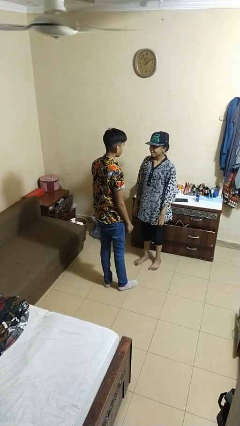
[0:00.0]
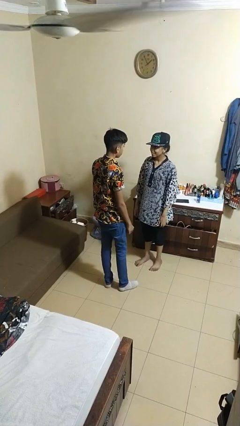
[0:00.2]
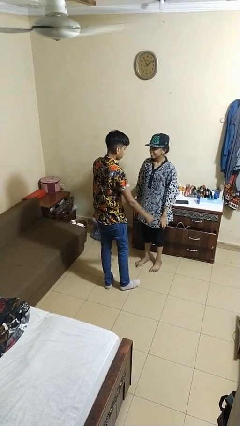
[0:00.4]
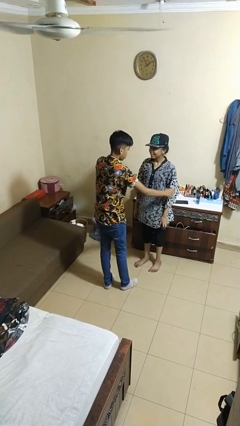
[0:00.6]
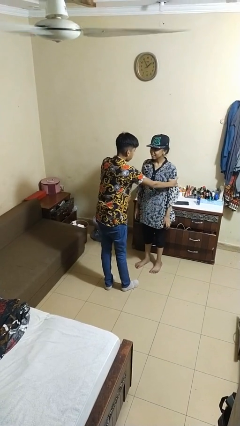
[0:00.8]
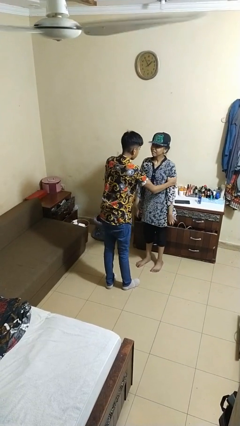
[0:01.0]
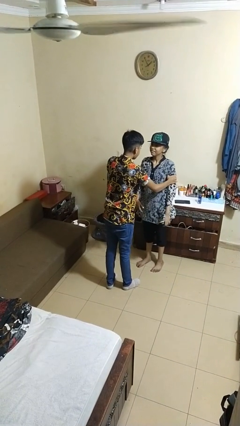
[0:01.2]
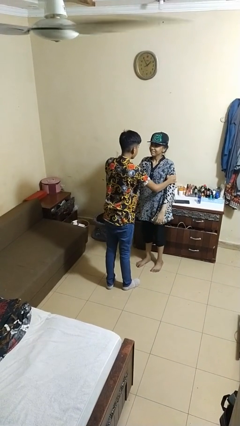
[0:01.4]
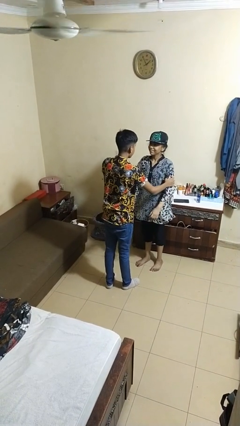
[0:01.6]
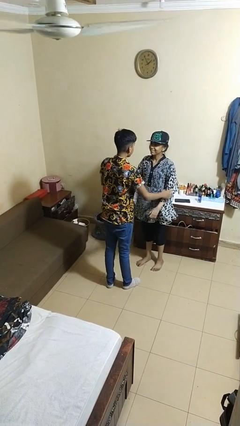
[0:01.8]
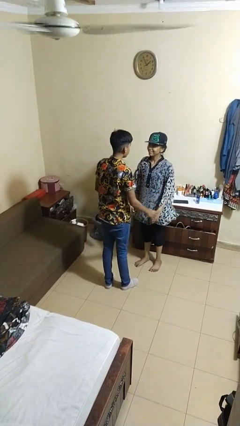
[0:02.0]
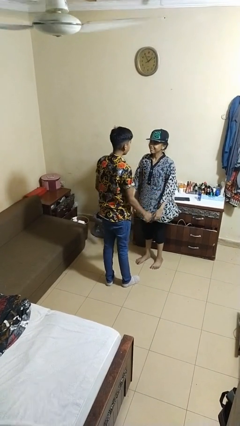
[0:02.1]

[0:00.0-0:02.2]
person grabs person by bicep

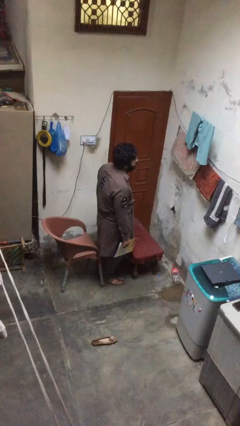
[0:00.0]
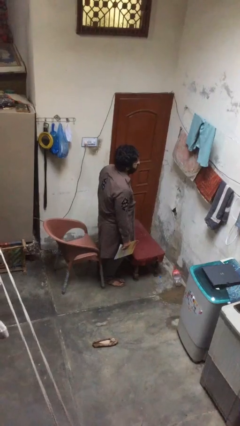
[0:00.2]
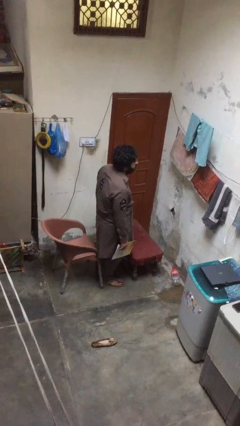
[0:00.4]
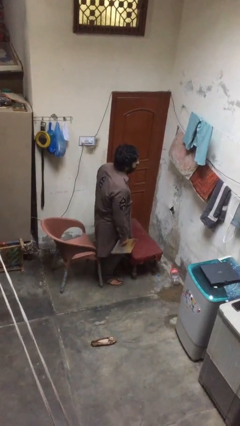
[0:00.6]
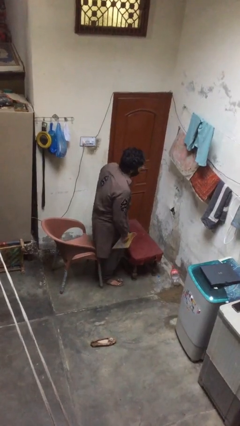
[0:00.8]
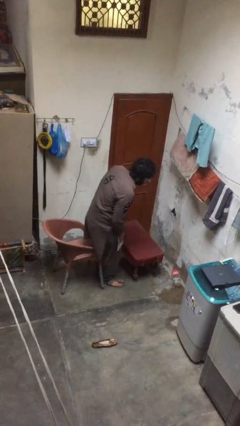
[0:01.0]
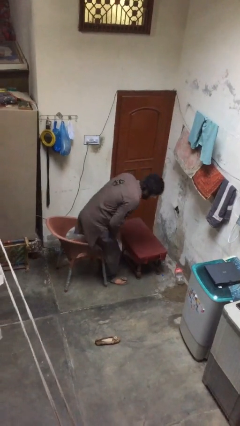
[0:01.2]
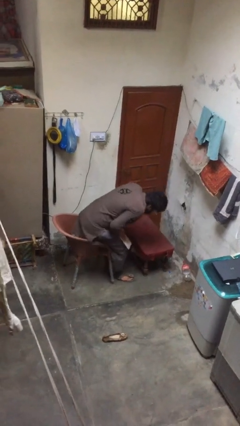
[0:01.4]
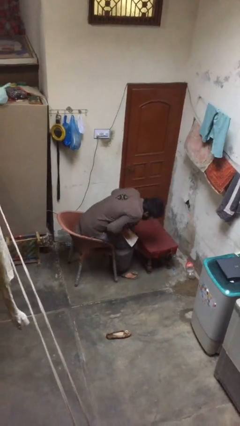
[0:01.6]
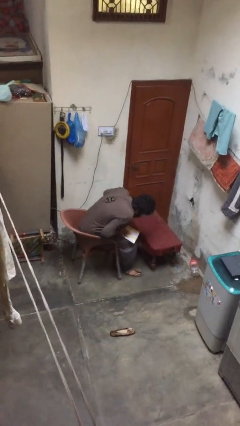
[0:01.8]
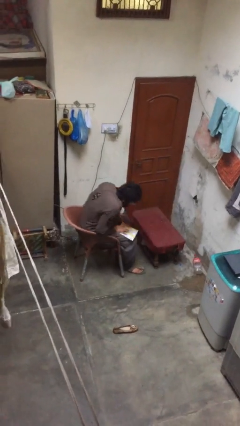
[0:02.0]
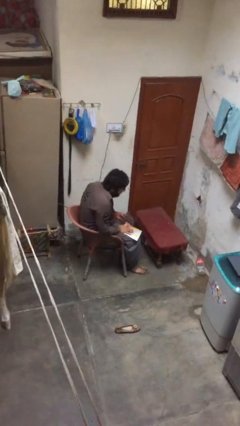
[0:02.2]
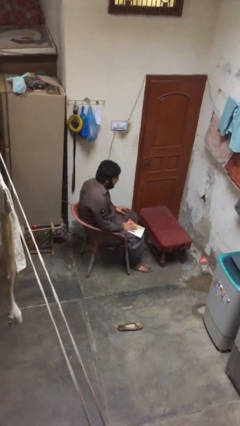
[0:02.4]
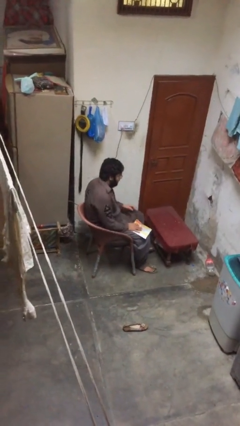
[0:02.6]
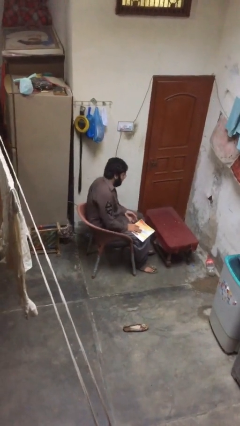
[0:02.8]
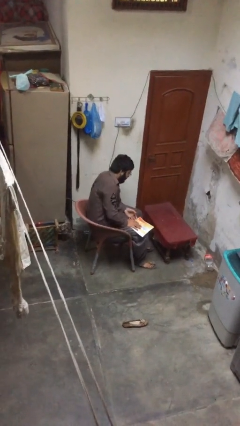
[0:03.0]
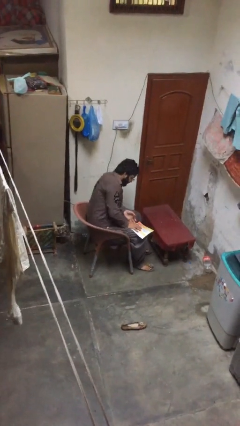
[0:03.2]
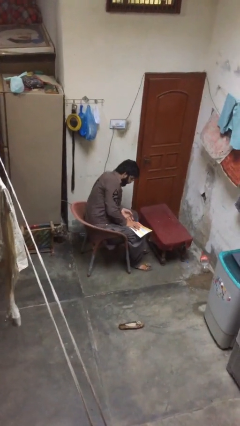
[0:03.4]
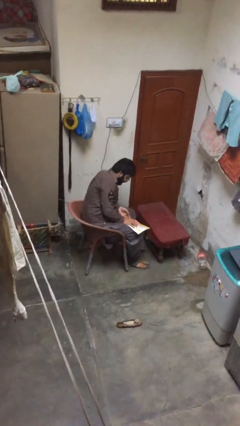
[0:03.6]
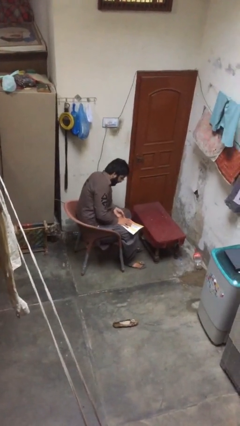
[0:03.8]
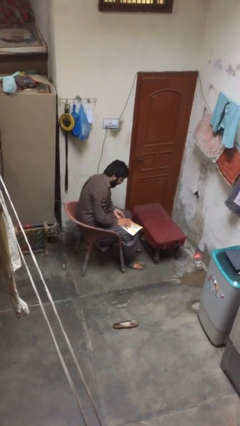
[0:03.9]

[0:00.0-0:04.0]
person sits down

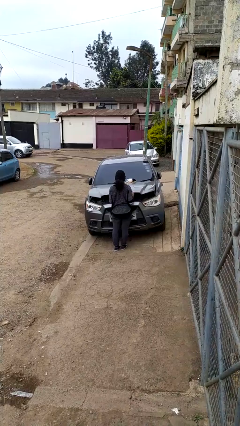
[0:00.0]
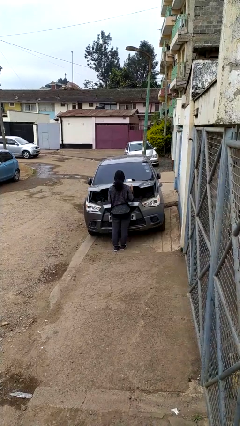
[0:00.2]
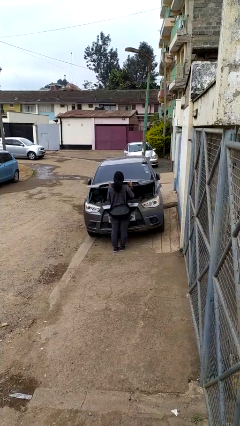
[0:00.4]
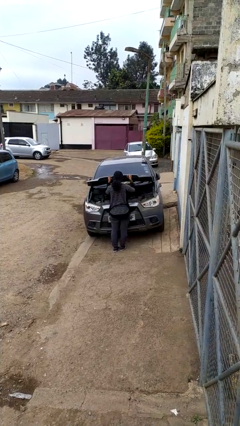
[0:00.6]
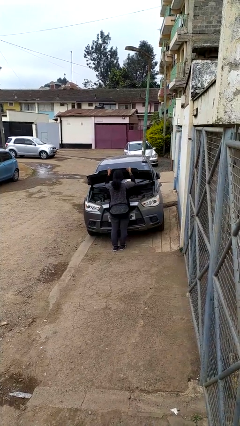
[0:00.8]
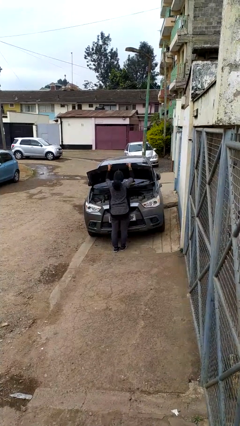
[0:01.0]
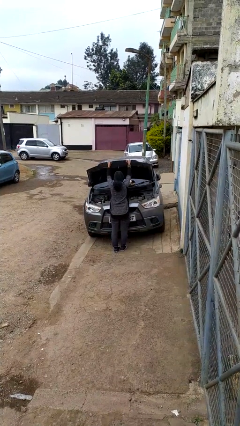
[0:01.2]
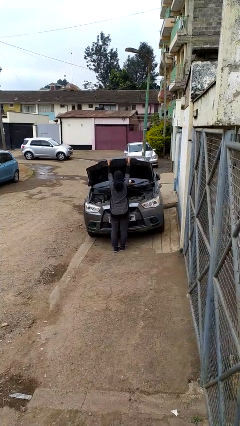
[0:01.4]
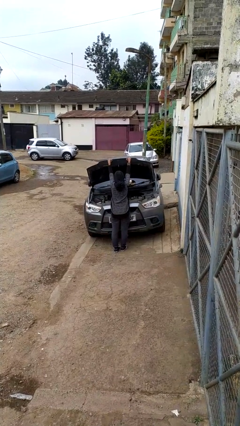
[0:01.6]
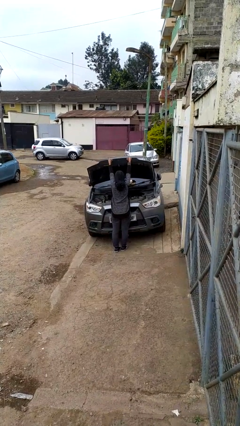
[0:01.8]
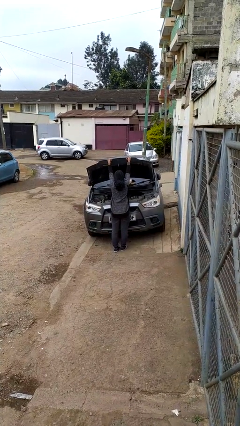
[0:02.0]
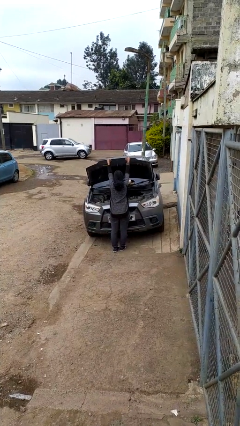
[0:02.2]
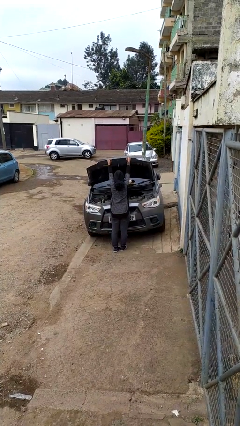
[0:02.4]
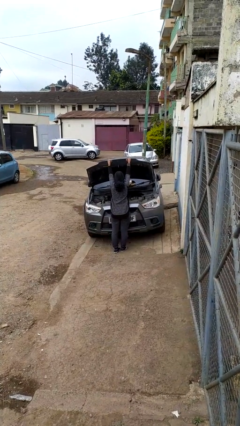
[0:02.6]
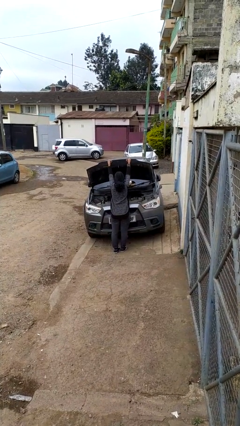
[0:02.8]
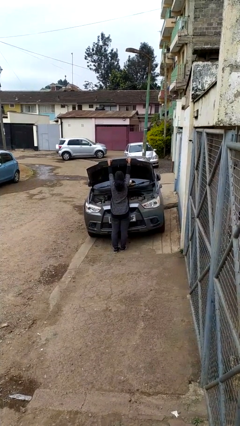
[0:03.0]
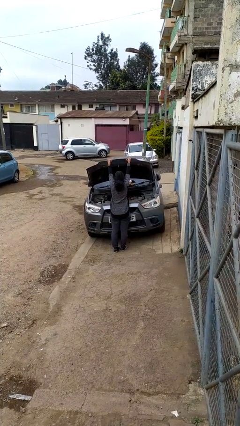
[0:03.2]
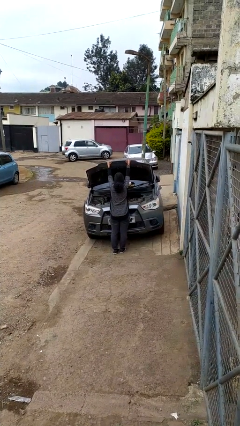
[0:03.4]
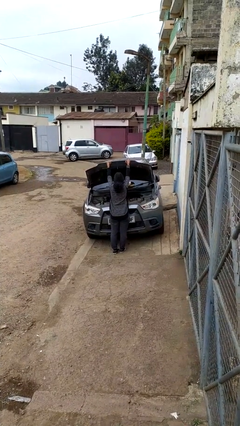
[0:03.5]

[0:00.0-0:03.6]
person opens car hood

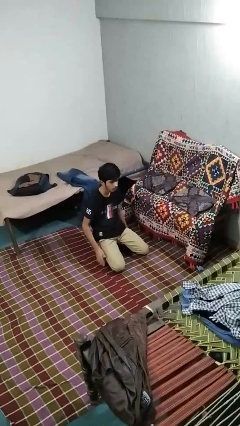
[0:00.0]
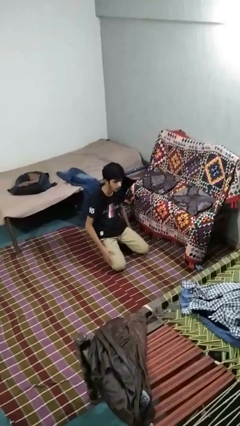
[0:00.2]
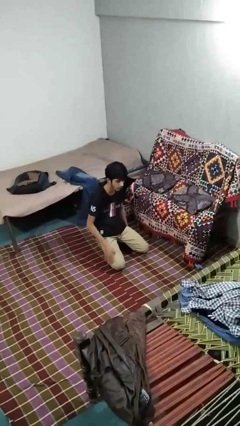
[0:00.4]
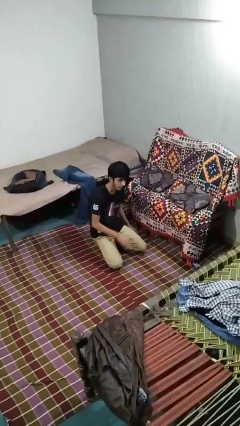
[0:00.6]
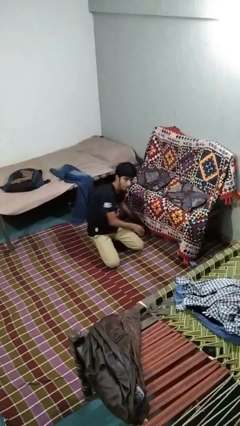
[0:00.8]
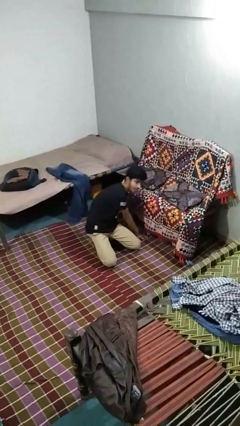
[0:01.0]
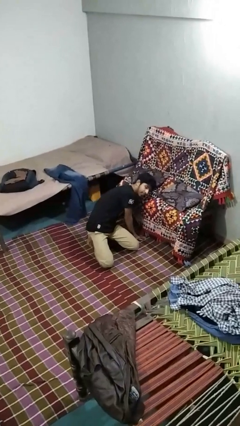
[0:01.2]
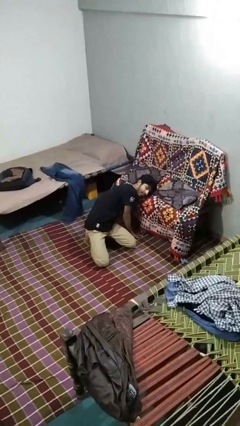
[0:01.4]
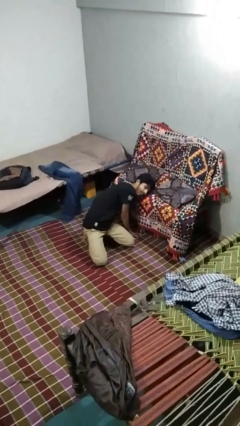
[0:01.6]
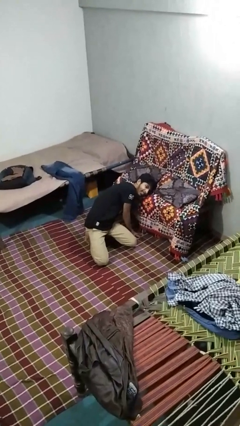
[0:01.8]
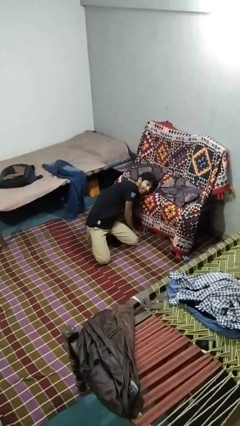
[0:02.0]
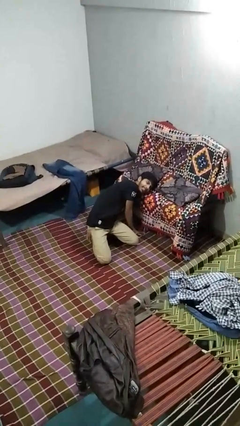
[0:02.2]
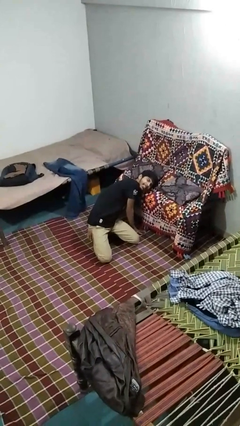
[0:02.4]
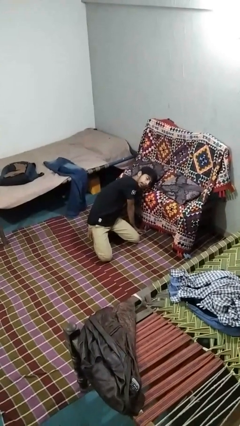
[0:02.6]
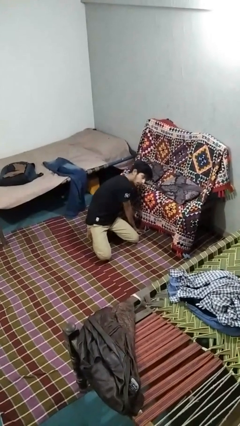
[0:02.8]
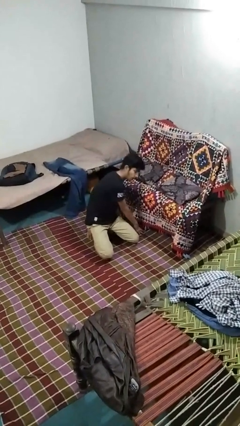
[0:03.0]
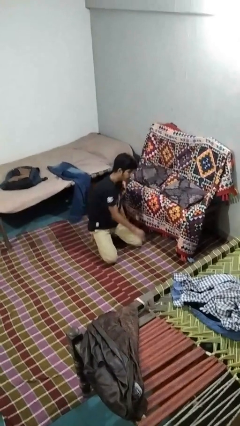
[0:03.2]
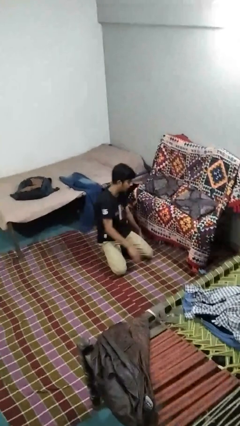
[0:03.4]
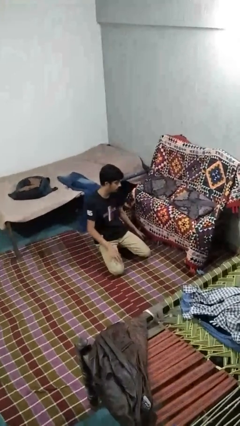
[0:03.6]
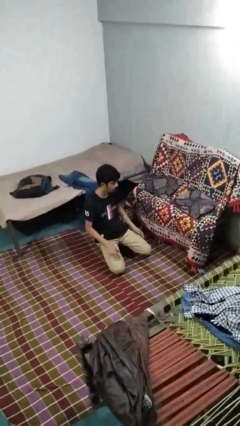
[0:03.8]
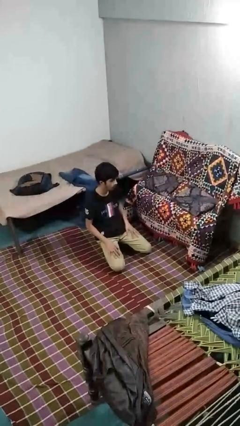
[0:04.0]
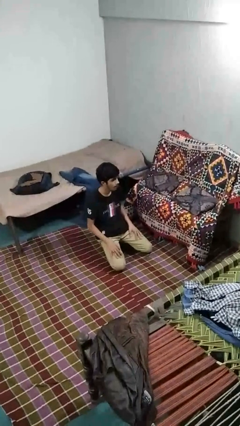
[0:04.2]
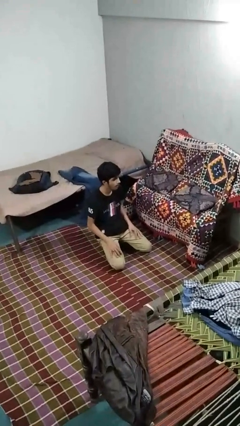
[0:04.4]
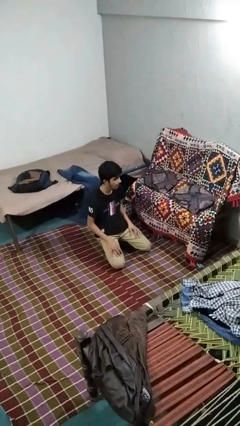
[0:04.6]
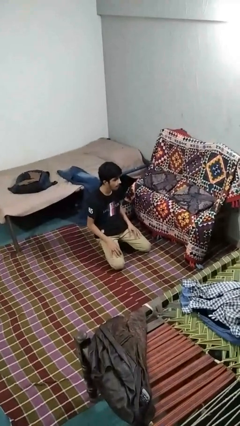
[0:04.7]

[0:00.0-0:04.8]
person searches under couch

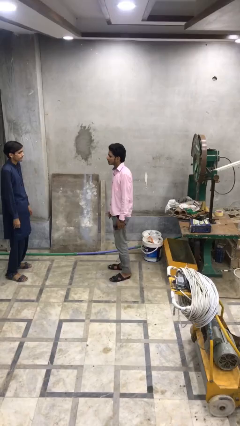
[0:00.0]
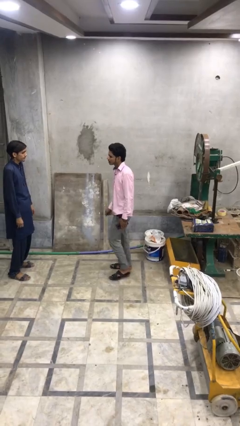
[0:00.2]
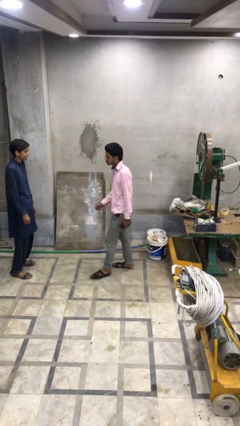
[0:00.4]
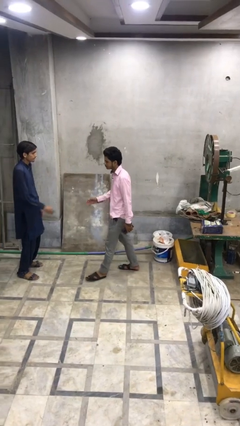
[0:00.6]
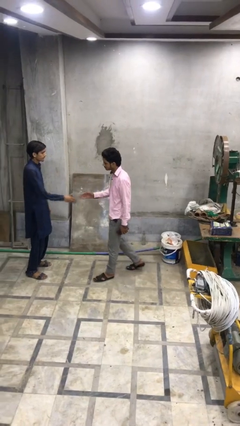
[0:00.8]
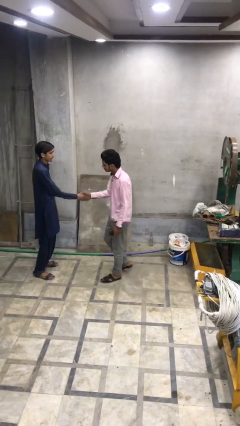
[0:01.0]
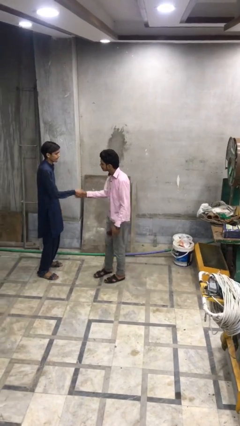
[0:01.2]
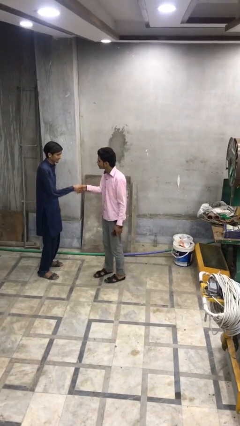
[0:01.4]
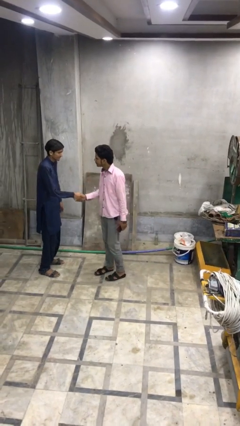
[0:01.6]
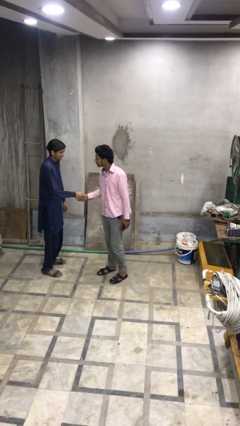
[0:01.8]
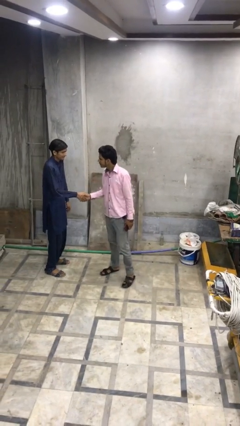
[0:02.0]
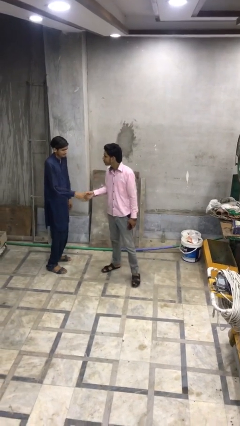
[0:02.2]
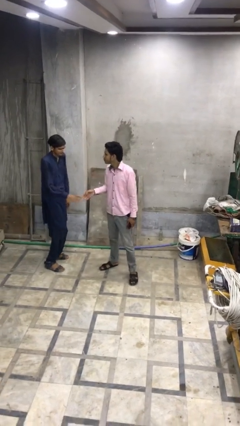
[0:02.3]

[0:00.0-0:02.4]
person shakes hand

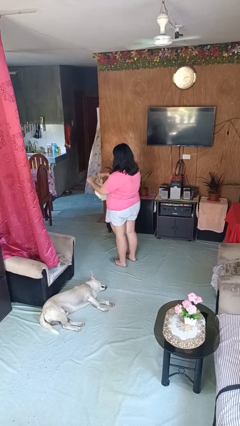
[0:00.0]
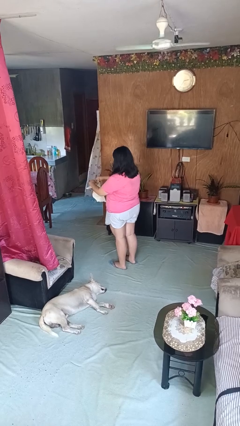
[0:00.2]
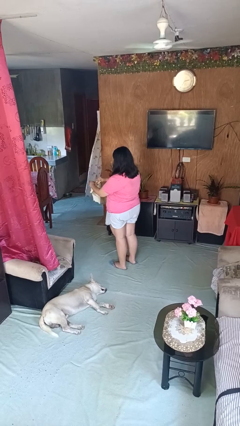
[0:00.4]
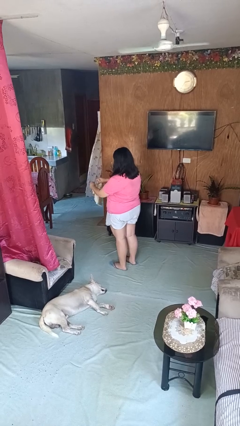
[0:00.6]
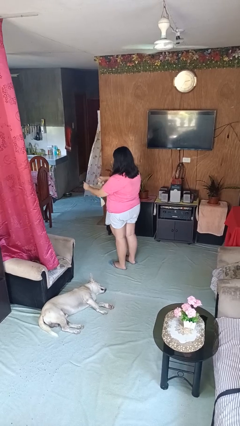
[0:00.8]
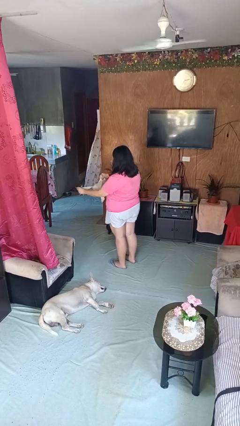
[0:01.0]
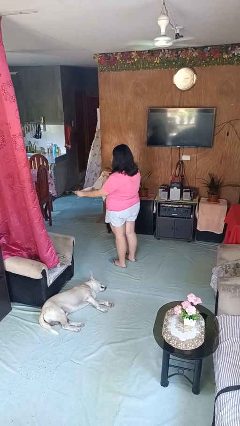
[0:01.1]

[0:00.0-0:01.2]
person tears paper
